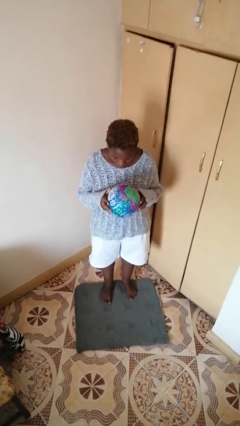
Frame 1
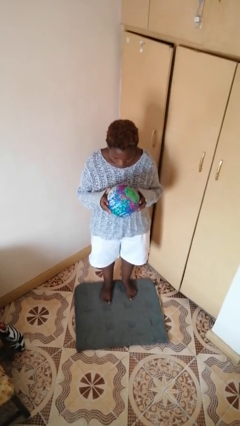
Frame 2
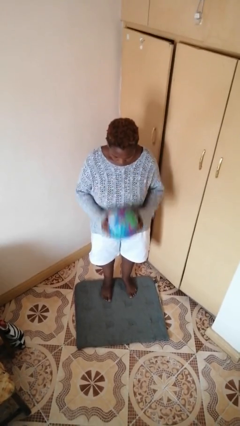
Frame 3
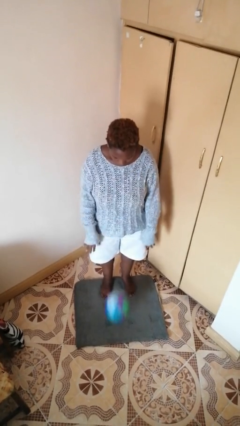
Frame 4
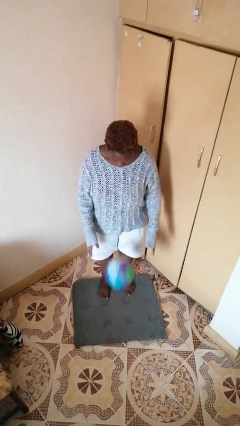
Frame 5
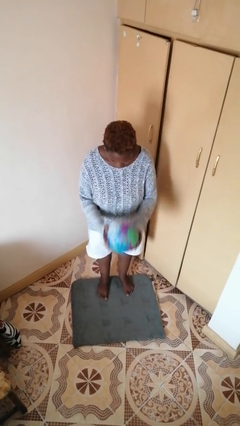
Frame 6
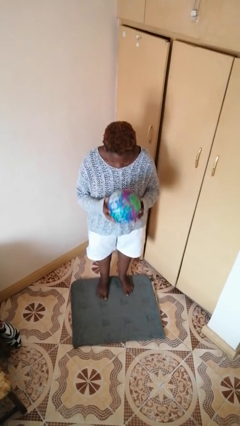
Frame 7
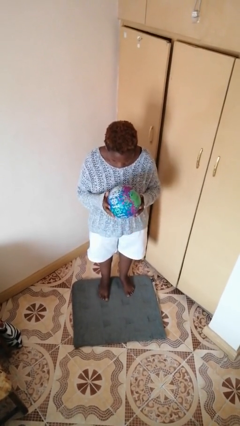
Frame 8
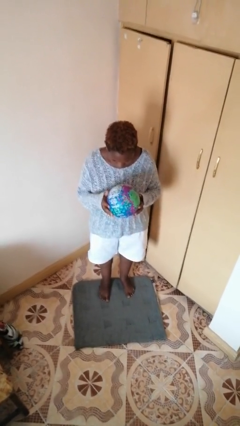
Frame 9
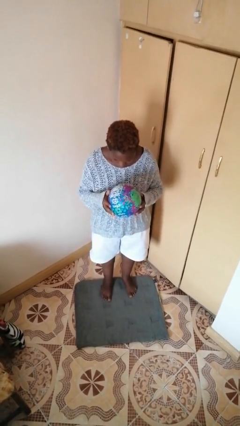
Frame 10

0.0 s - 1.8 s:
person bounces ball on floor

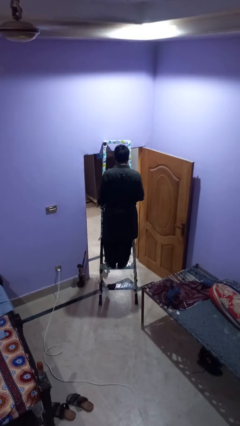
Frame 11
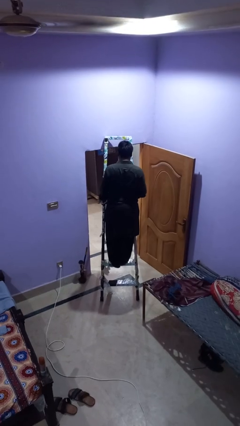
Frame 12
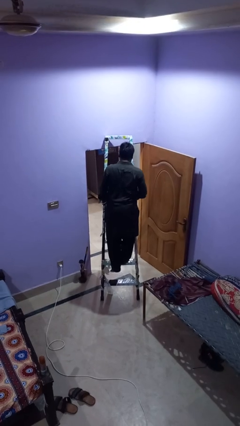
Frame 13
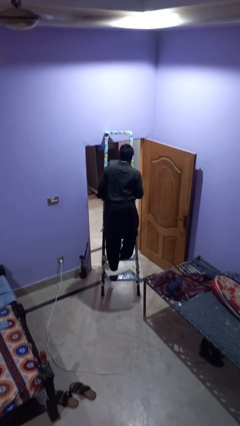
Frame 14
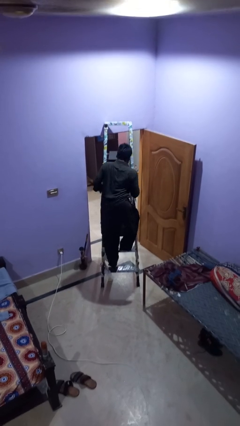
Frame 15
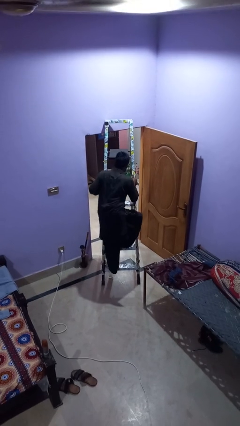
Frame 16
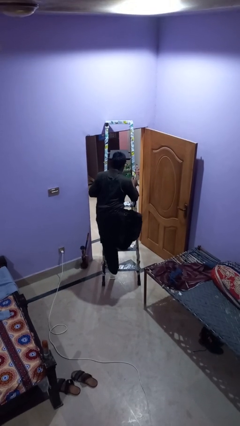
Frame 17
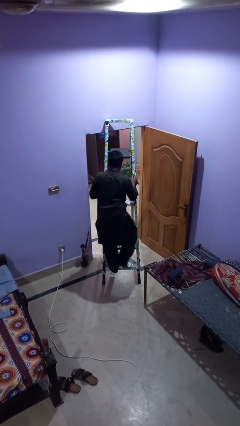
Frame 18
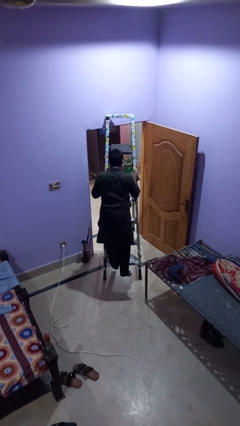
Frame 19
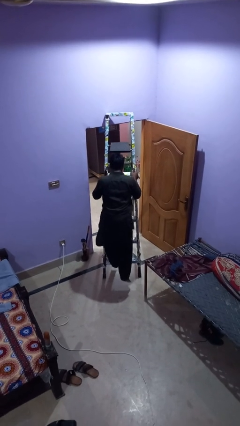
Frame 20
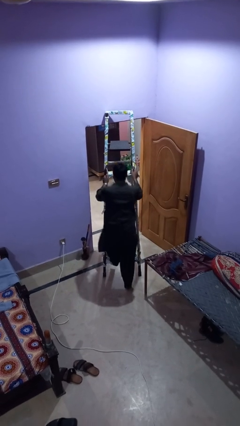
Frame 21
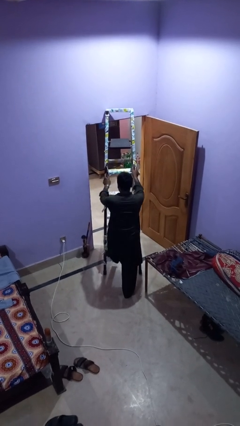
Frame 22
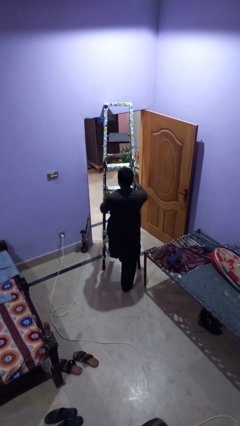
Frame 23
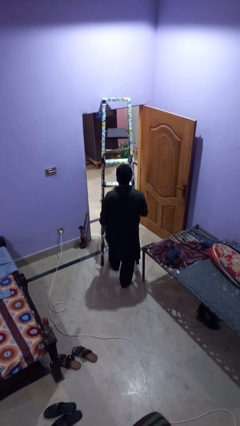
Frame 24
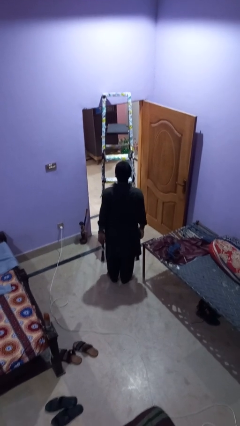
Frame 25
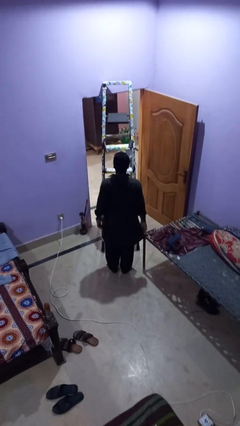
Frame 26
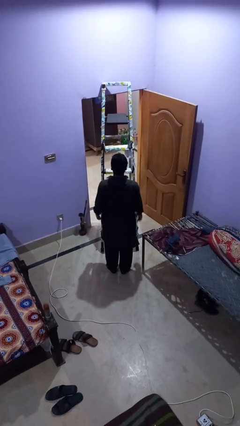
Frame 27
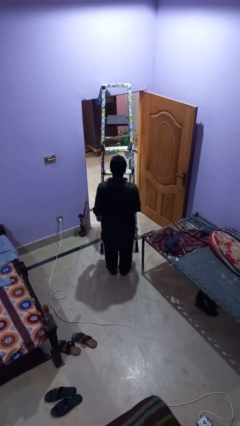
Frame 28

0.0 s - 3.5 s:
person climbs down ladder

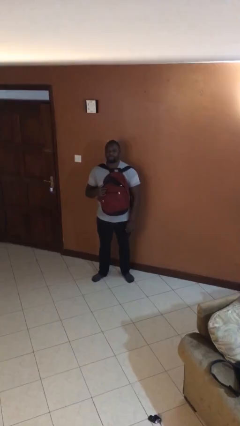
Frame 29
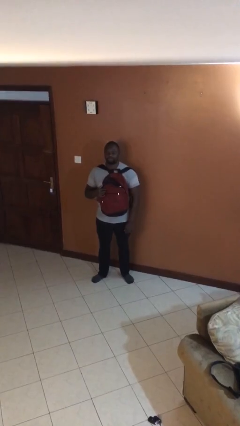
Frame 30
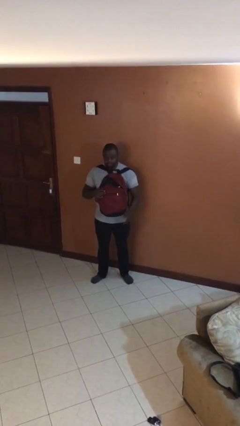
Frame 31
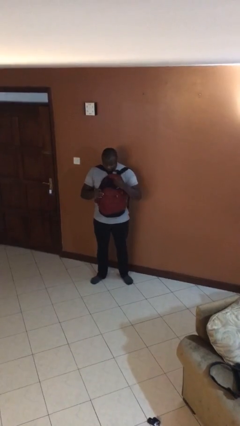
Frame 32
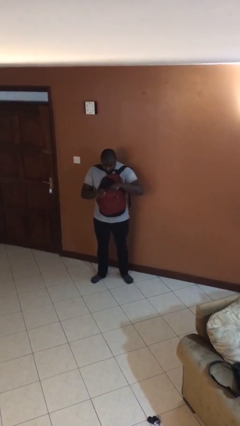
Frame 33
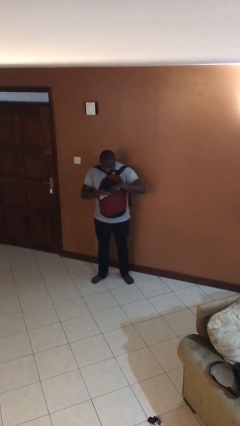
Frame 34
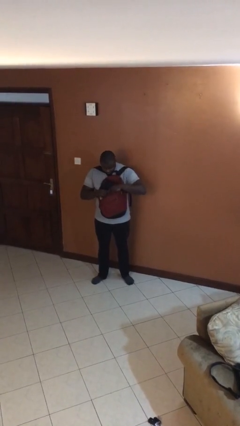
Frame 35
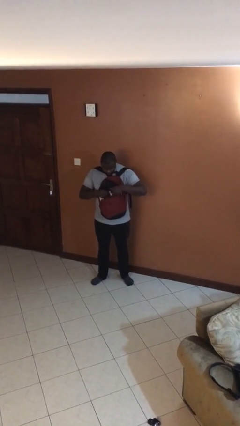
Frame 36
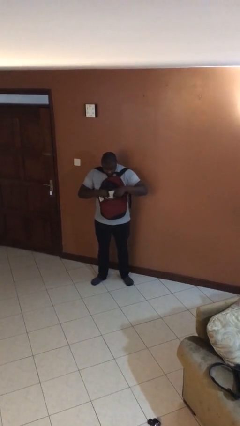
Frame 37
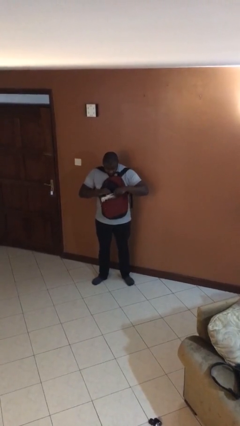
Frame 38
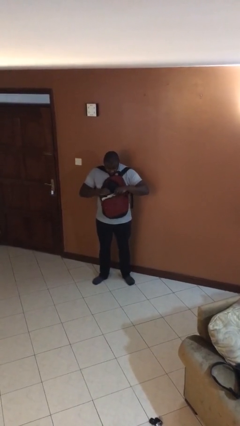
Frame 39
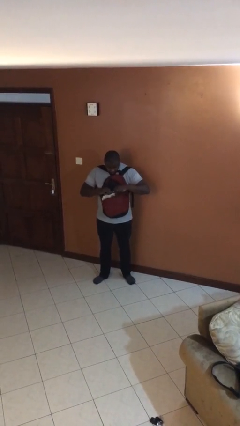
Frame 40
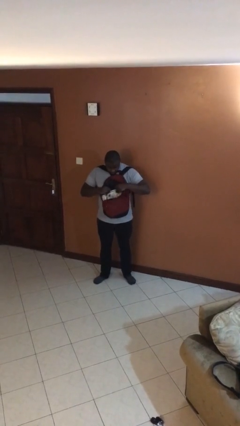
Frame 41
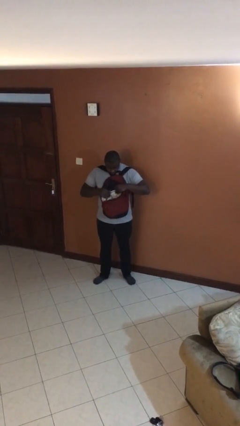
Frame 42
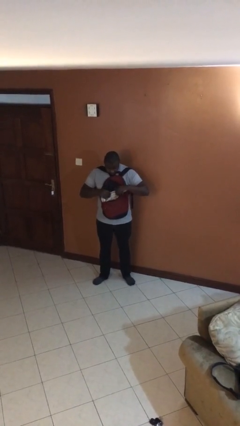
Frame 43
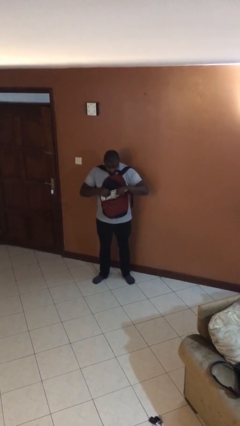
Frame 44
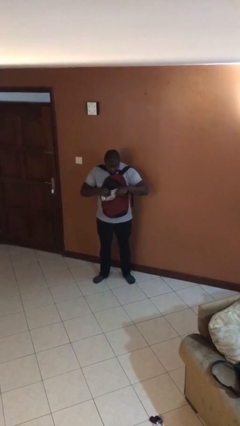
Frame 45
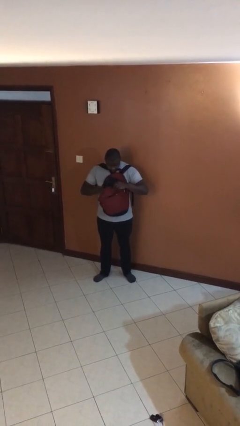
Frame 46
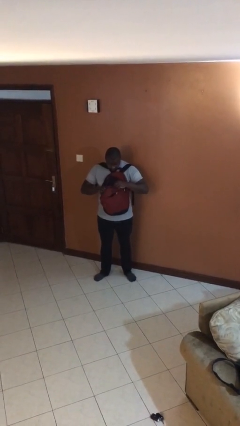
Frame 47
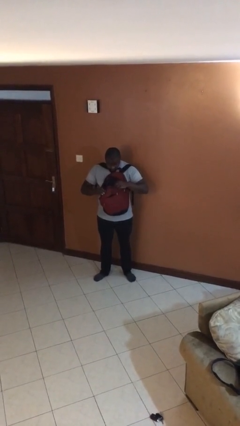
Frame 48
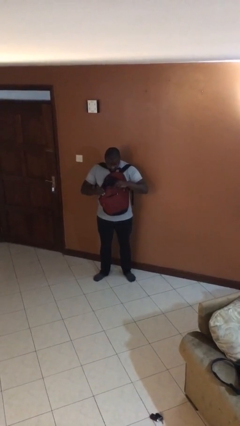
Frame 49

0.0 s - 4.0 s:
person searches in backpack

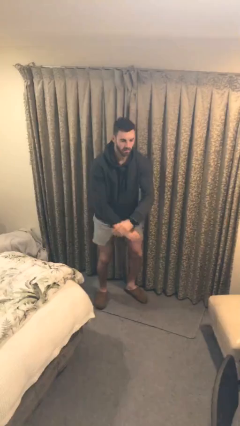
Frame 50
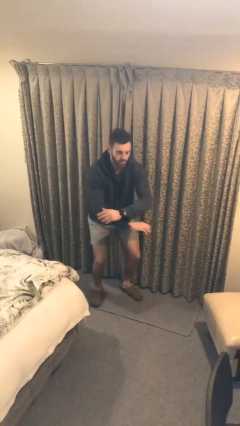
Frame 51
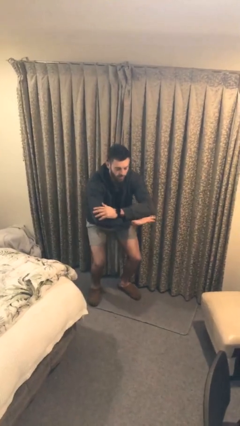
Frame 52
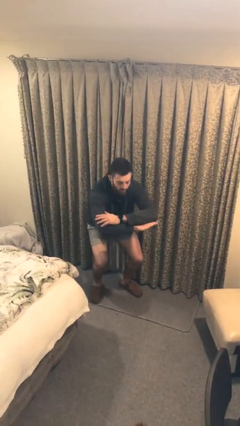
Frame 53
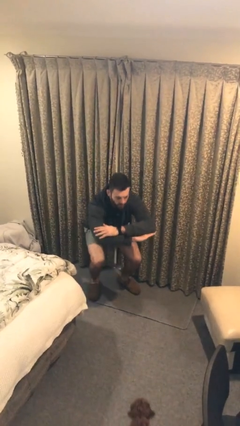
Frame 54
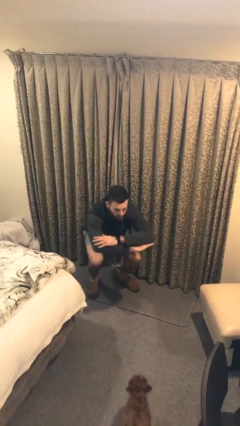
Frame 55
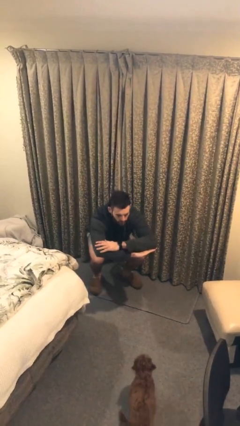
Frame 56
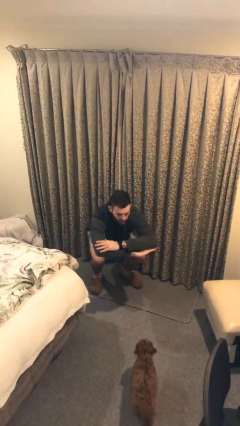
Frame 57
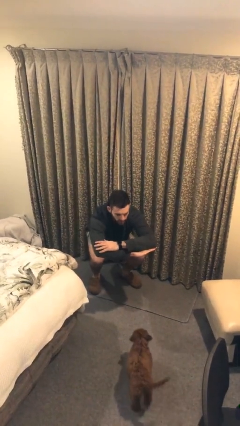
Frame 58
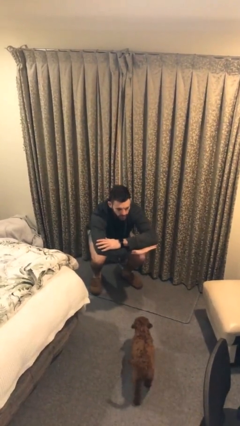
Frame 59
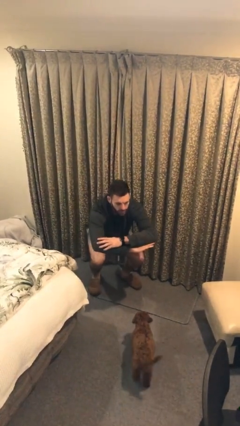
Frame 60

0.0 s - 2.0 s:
person squats

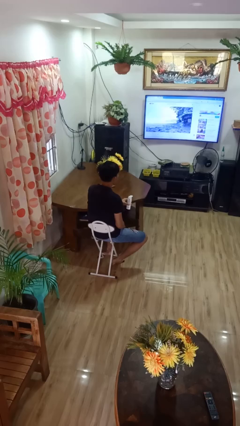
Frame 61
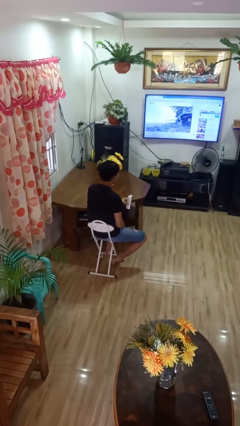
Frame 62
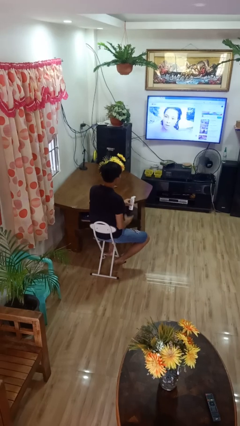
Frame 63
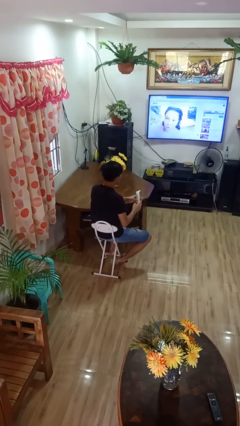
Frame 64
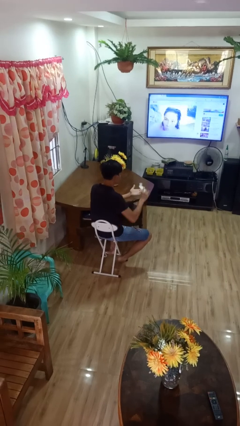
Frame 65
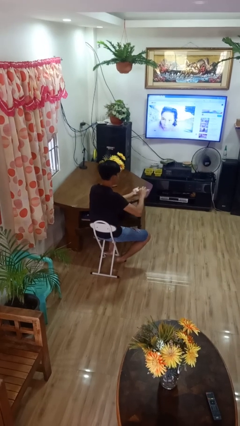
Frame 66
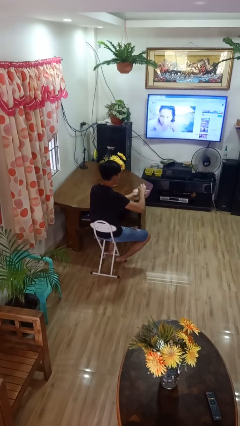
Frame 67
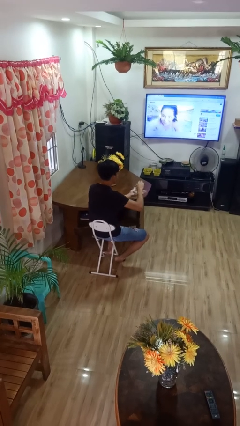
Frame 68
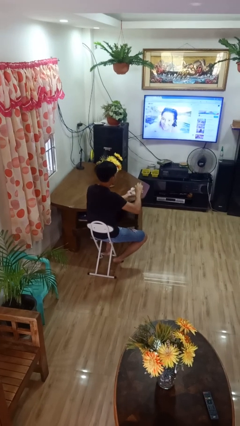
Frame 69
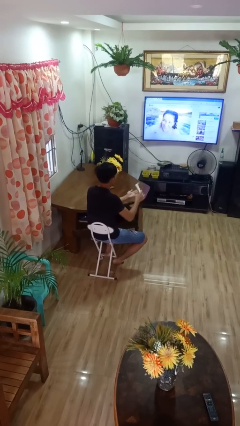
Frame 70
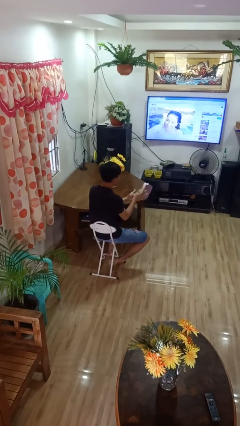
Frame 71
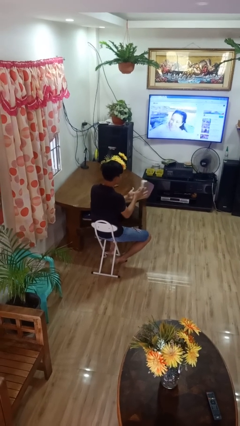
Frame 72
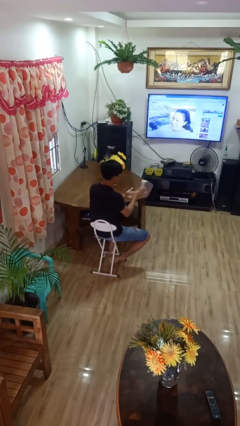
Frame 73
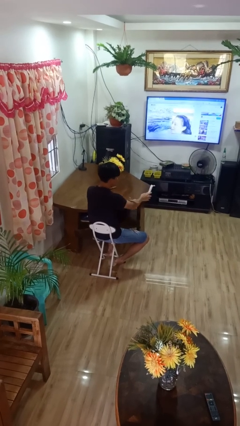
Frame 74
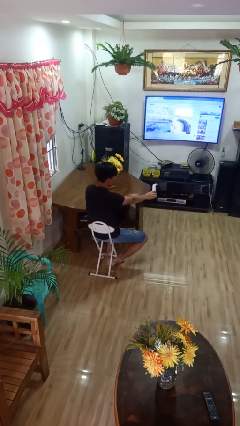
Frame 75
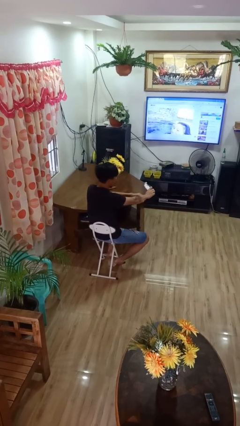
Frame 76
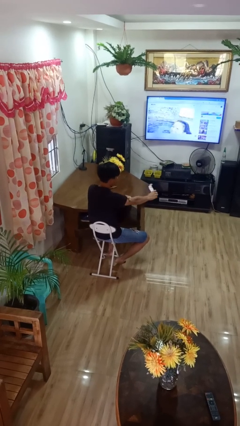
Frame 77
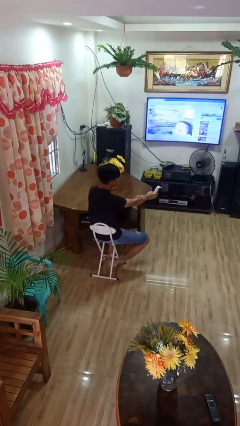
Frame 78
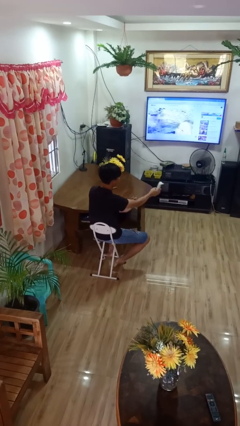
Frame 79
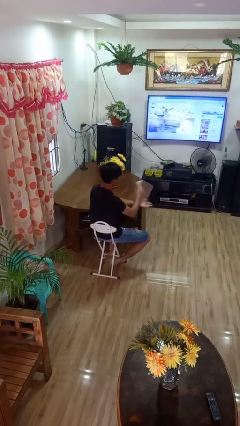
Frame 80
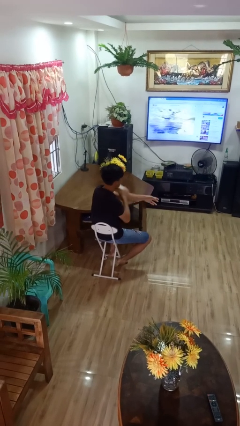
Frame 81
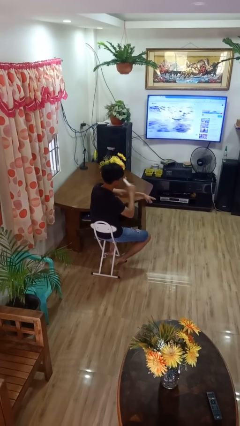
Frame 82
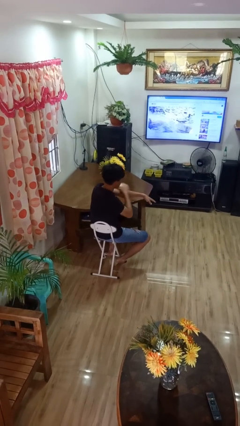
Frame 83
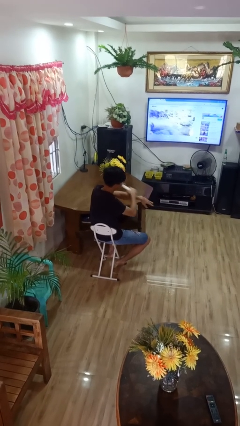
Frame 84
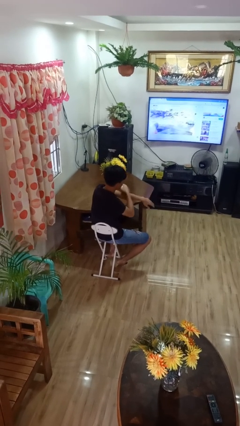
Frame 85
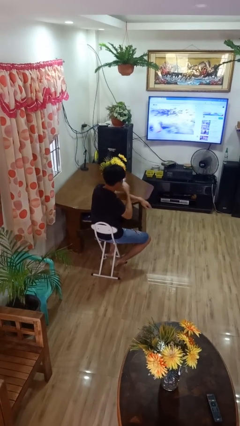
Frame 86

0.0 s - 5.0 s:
person applies sunscreen

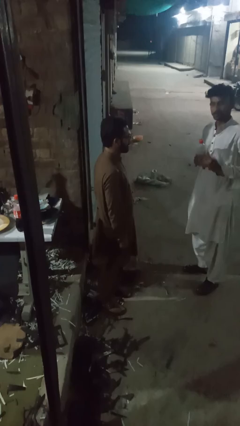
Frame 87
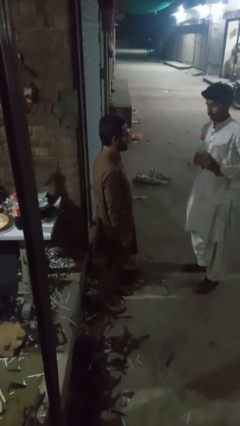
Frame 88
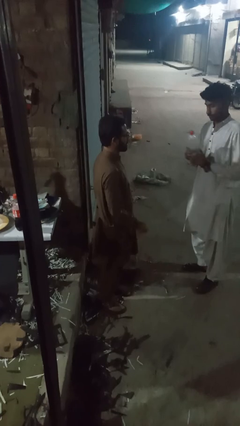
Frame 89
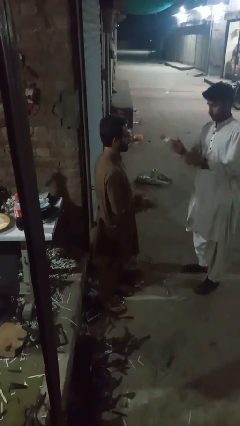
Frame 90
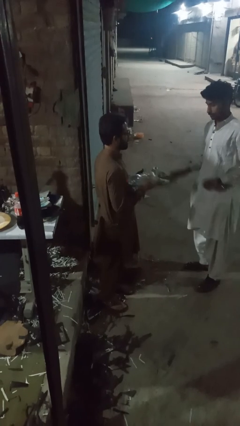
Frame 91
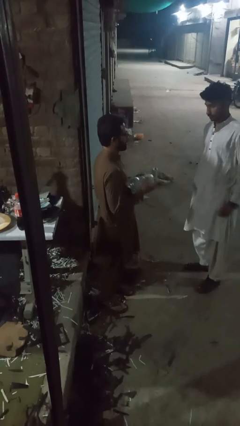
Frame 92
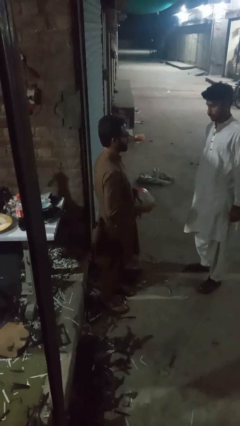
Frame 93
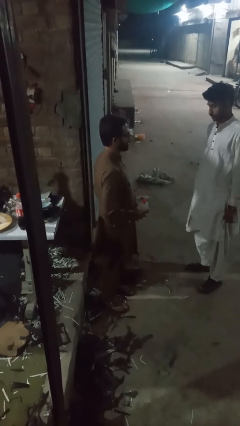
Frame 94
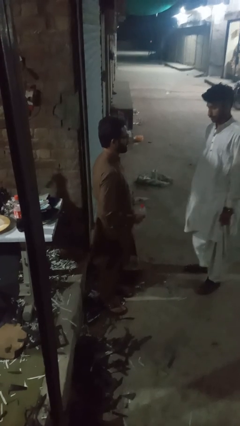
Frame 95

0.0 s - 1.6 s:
person catches object from person

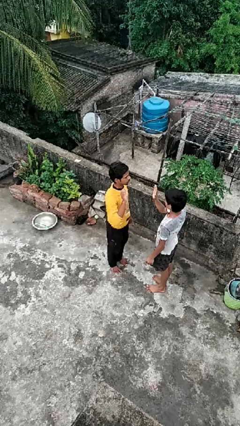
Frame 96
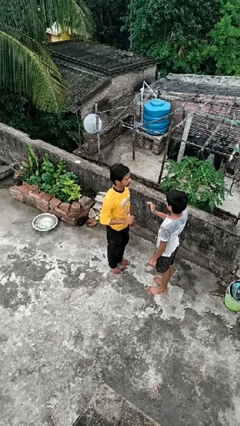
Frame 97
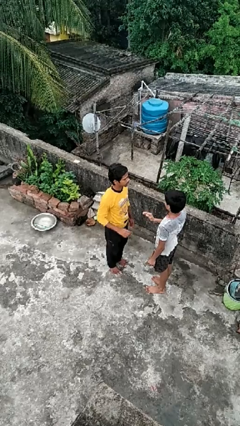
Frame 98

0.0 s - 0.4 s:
person highfives hand
